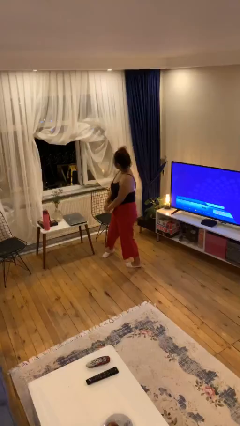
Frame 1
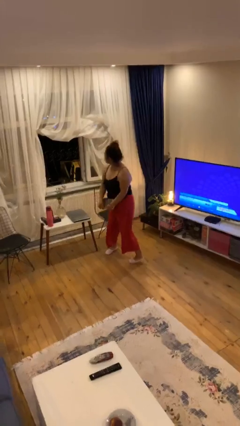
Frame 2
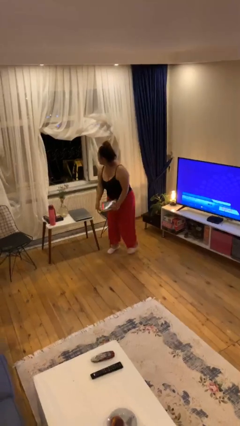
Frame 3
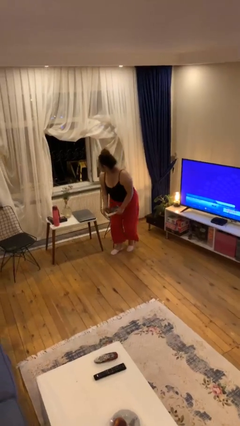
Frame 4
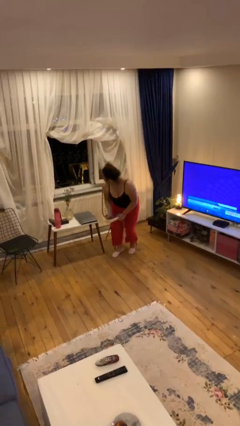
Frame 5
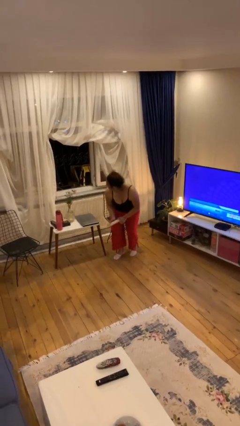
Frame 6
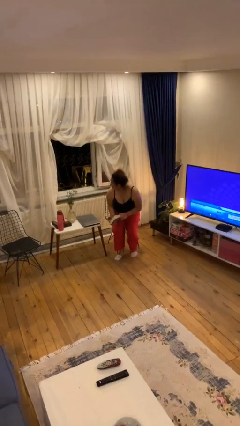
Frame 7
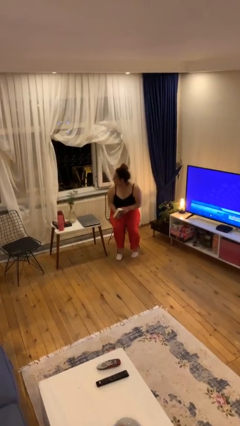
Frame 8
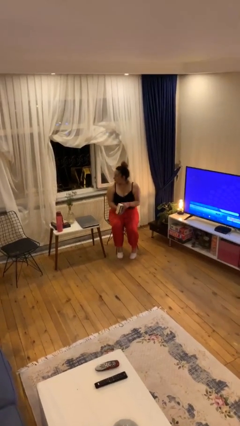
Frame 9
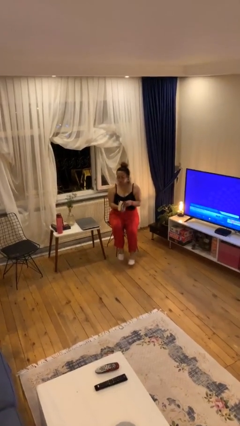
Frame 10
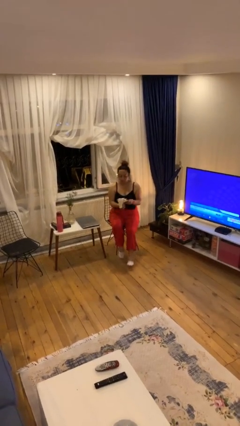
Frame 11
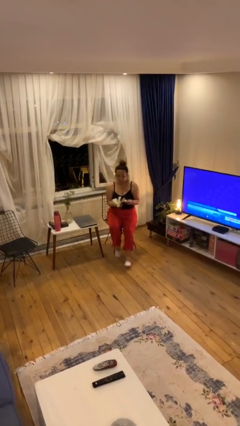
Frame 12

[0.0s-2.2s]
person sits down

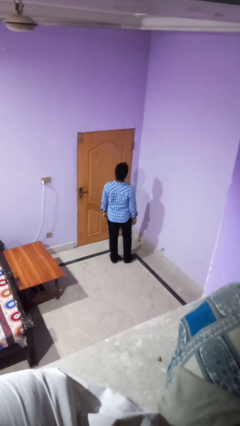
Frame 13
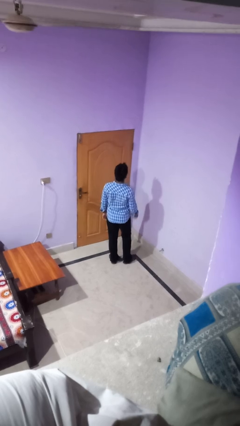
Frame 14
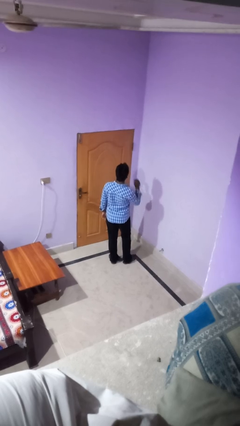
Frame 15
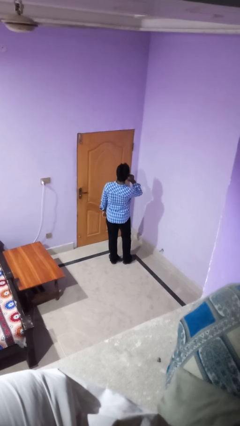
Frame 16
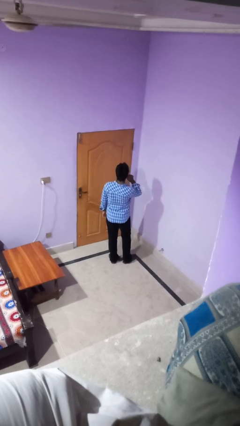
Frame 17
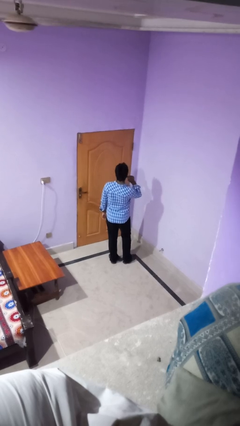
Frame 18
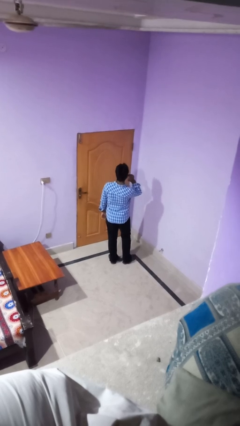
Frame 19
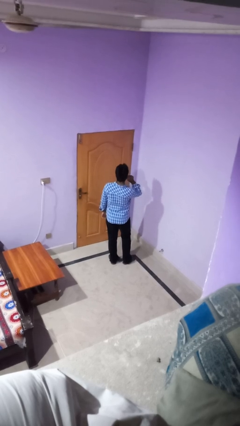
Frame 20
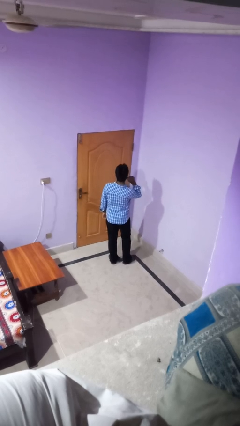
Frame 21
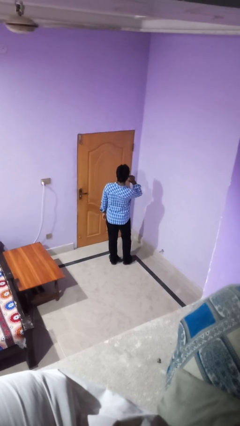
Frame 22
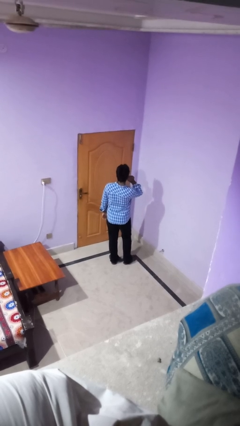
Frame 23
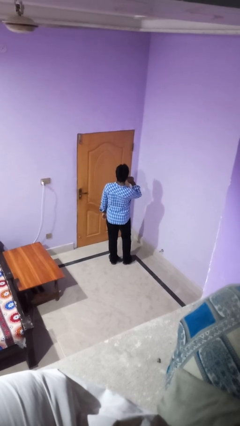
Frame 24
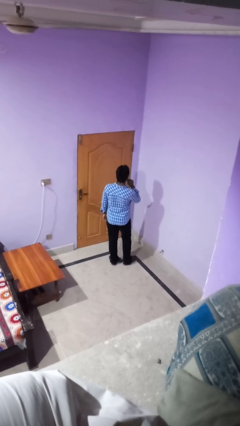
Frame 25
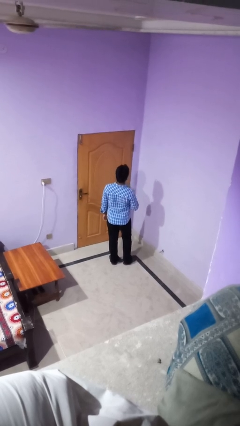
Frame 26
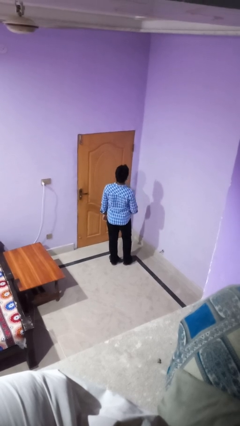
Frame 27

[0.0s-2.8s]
person touches earlobe

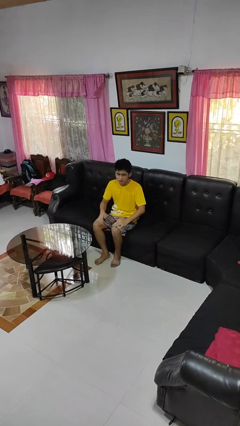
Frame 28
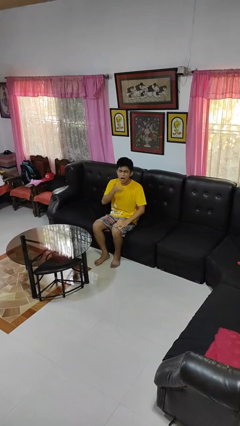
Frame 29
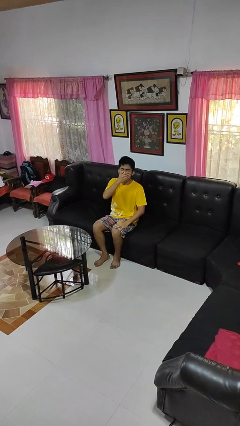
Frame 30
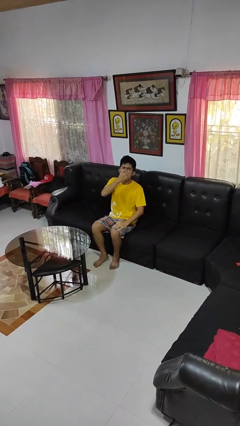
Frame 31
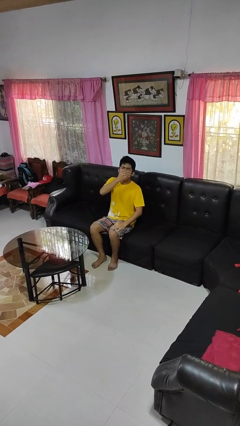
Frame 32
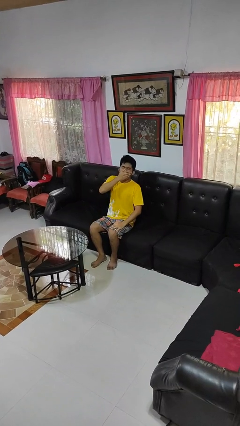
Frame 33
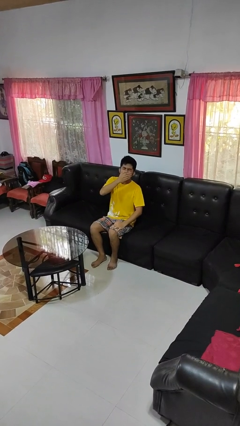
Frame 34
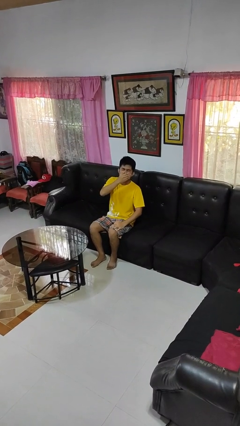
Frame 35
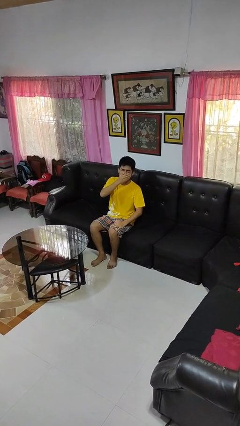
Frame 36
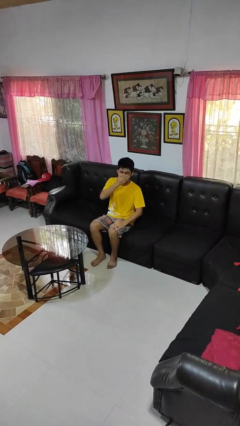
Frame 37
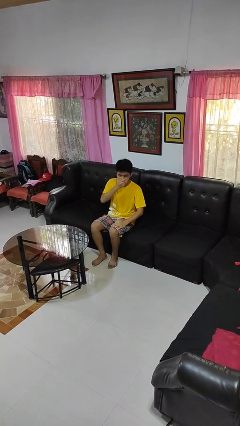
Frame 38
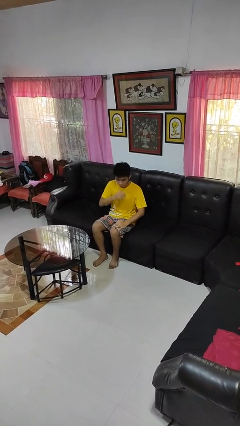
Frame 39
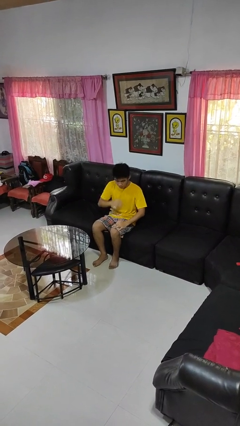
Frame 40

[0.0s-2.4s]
person yawns

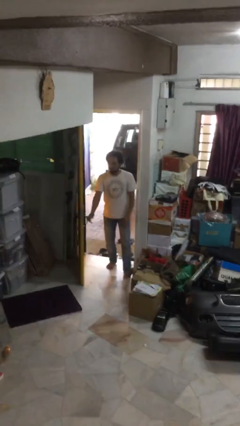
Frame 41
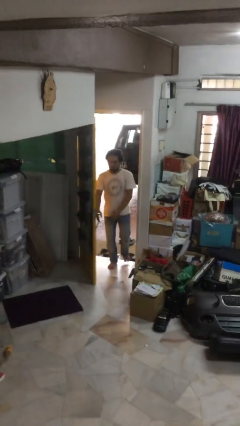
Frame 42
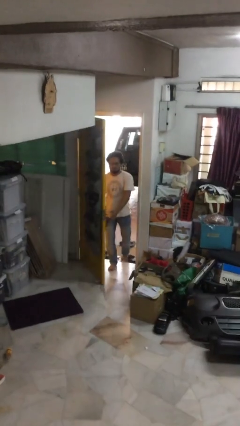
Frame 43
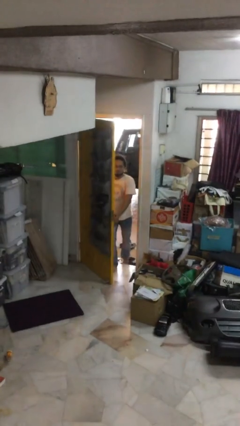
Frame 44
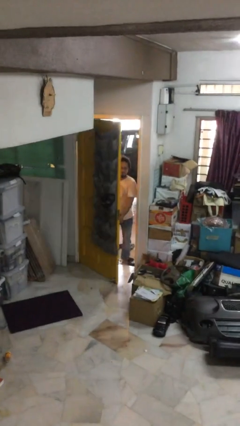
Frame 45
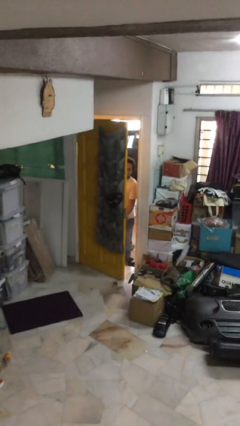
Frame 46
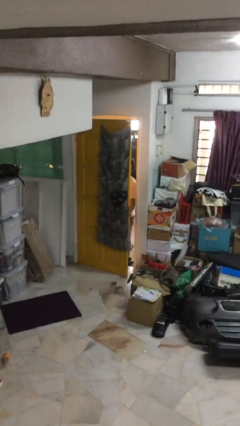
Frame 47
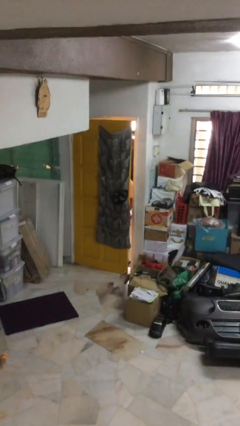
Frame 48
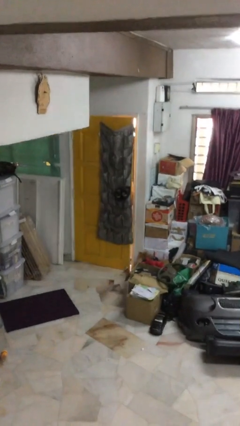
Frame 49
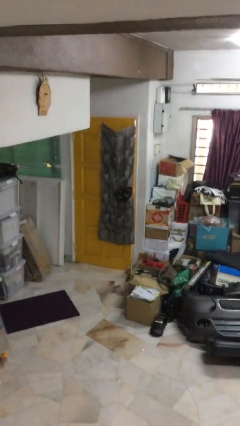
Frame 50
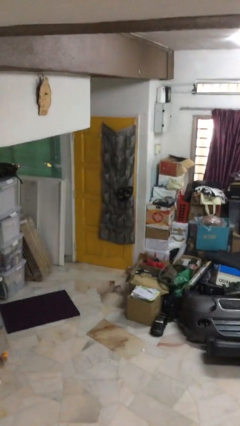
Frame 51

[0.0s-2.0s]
person closes facility door

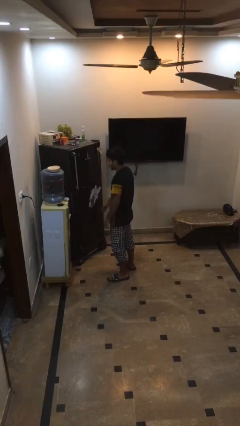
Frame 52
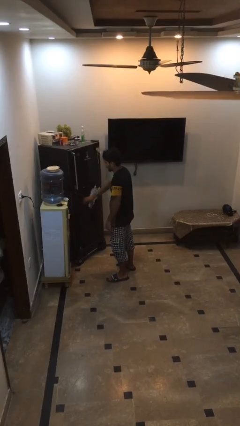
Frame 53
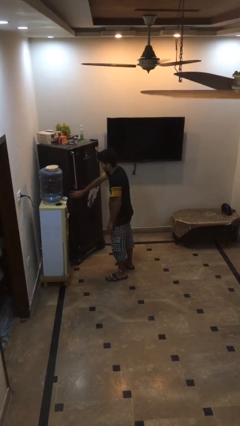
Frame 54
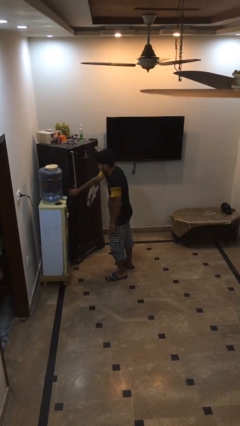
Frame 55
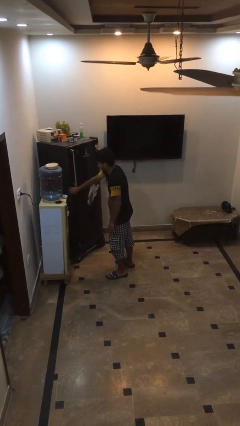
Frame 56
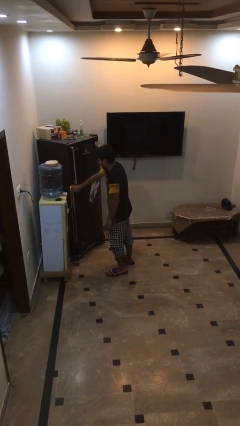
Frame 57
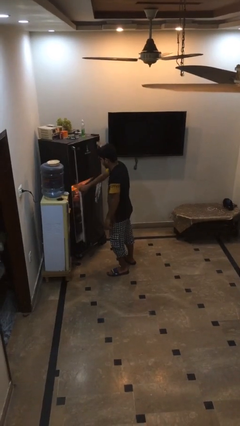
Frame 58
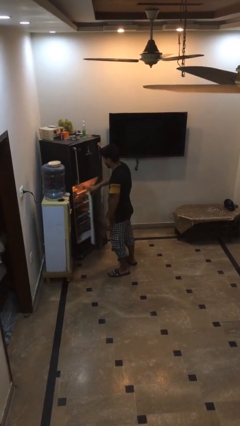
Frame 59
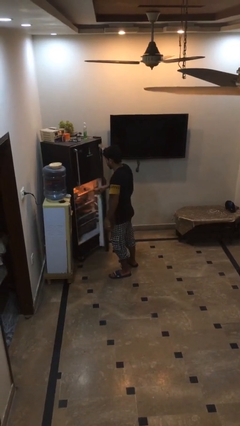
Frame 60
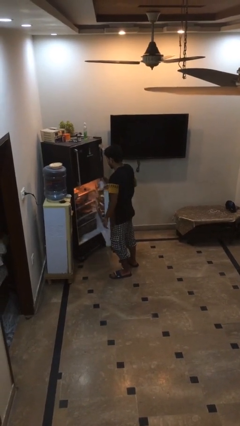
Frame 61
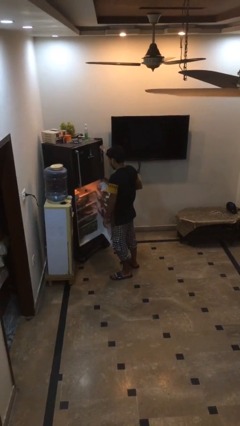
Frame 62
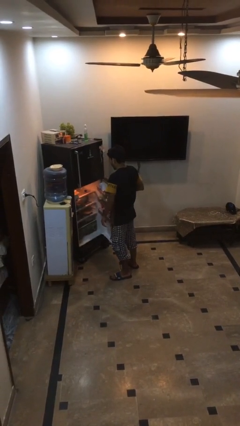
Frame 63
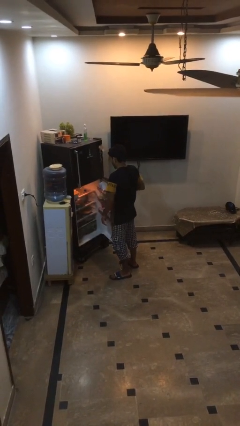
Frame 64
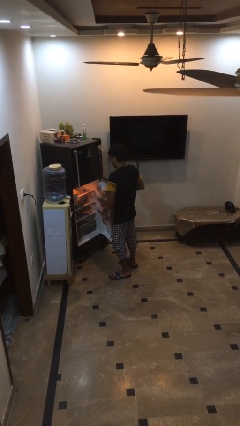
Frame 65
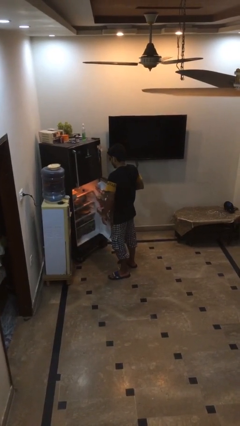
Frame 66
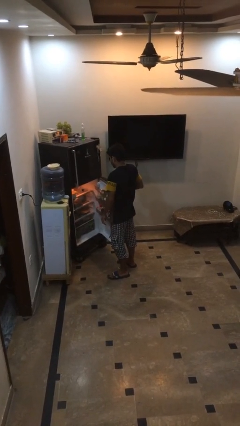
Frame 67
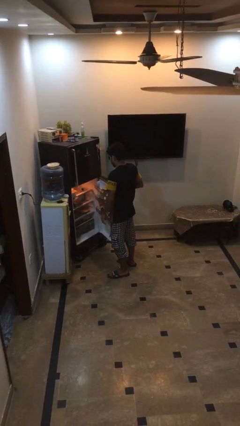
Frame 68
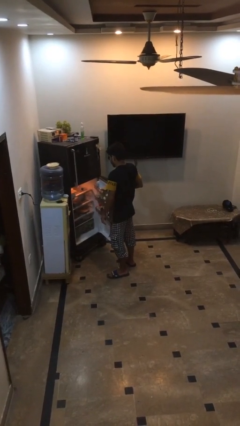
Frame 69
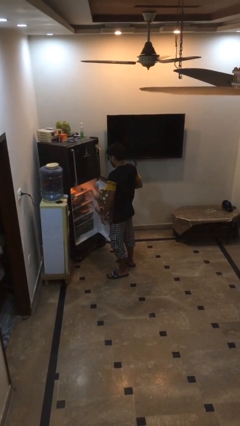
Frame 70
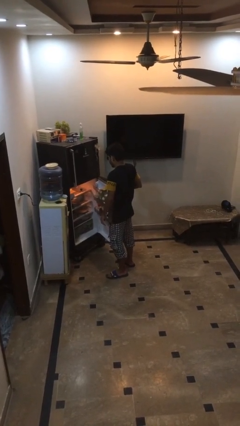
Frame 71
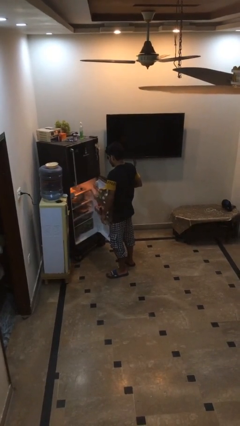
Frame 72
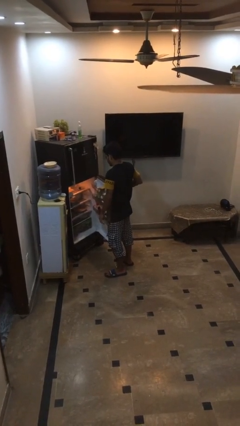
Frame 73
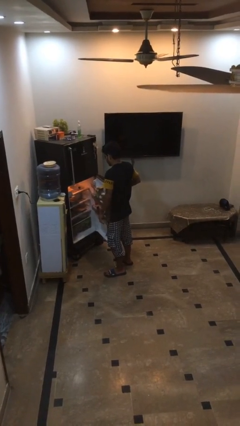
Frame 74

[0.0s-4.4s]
person opens refrigerator

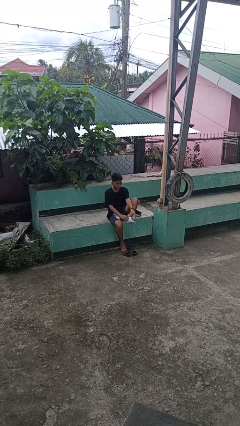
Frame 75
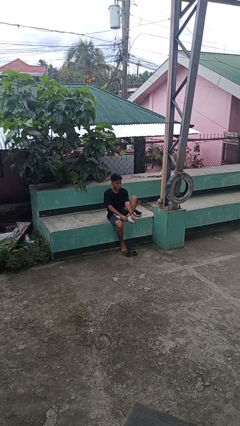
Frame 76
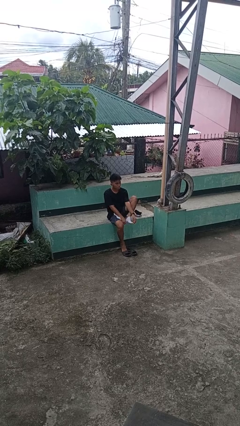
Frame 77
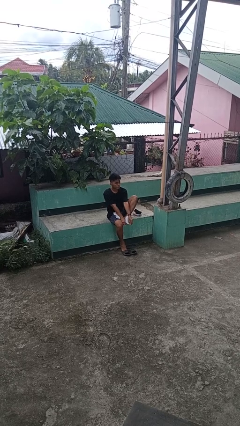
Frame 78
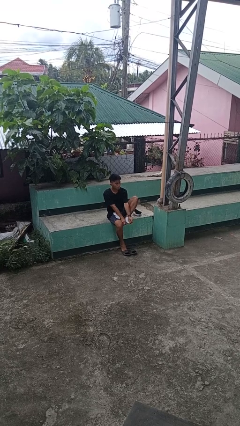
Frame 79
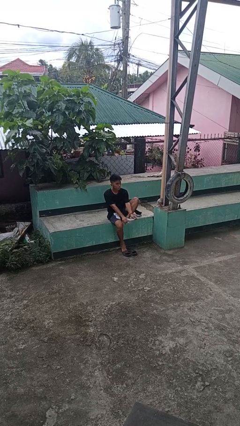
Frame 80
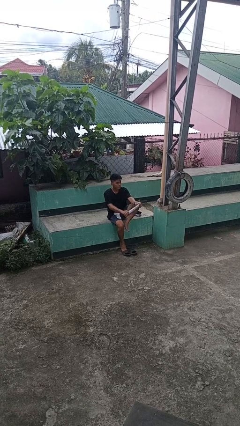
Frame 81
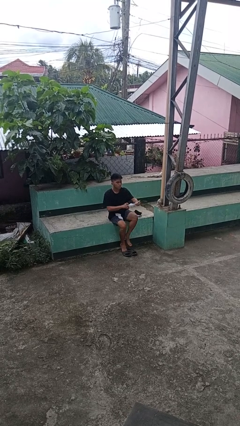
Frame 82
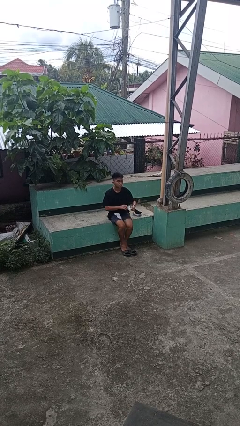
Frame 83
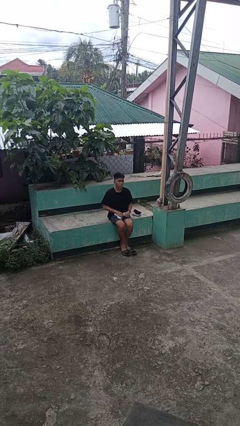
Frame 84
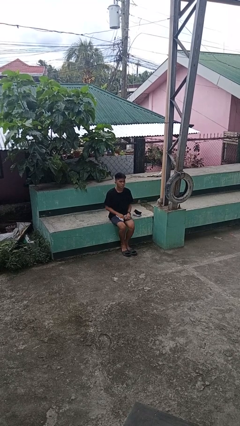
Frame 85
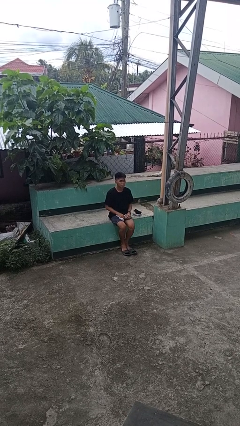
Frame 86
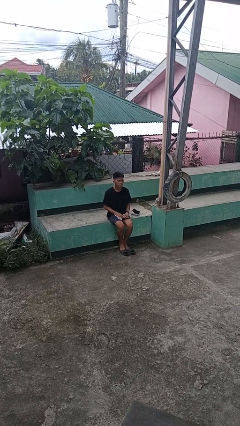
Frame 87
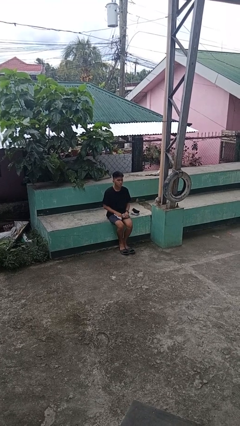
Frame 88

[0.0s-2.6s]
person takes off socks

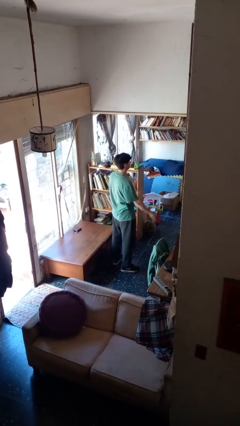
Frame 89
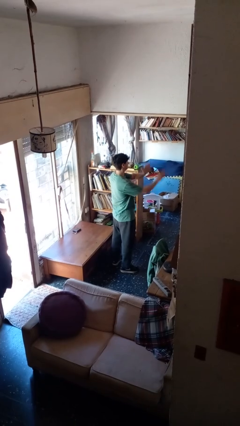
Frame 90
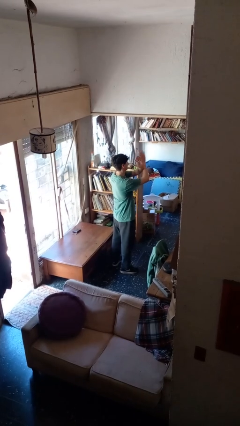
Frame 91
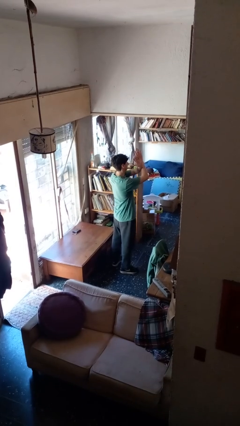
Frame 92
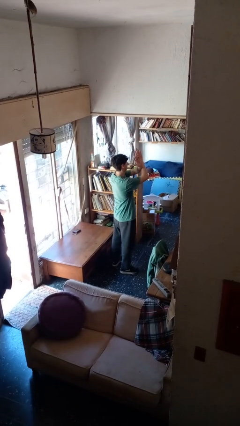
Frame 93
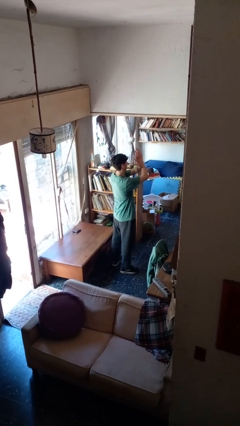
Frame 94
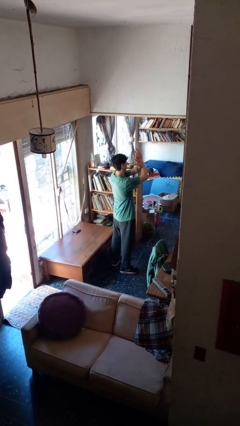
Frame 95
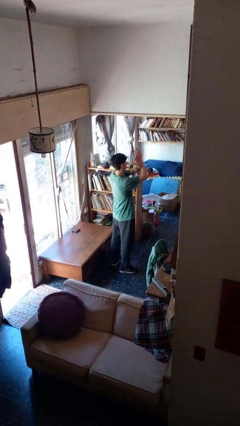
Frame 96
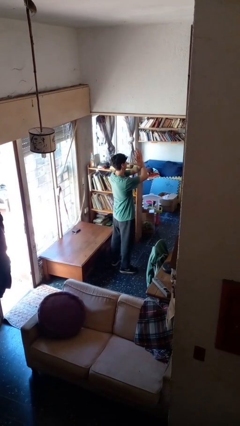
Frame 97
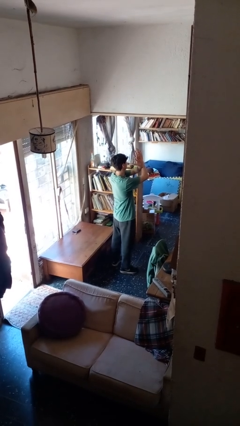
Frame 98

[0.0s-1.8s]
person gestures arms x
